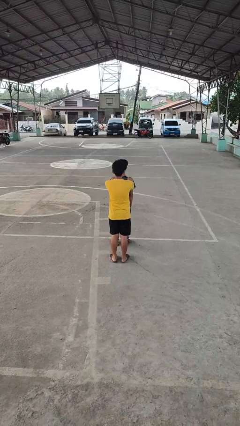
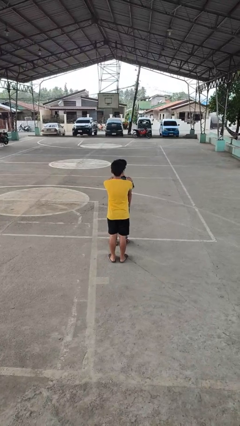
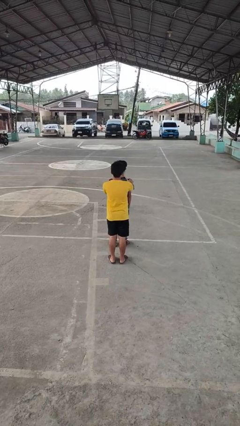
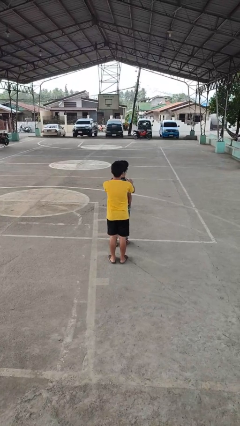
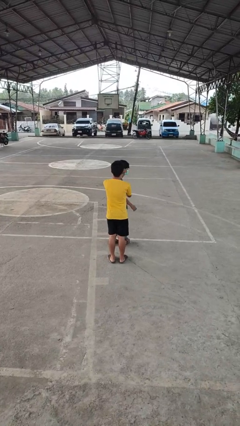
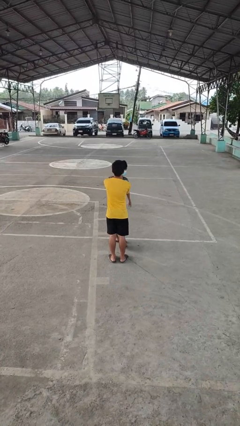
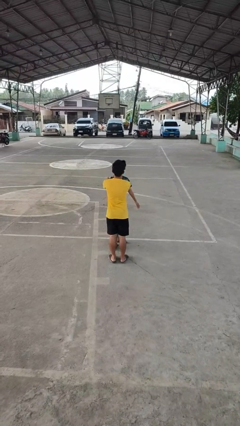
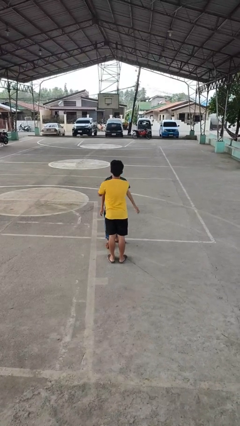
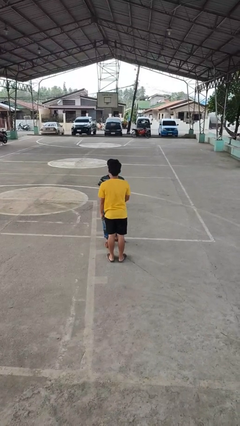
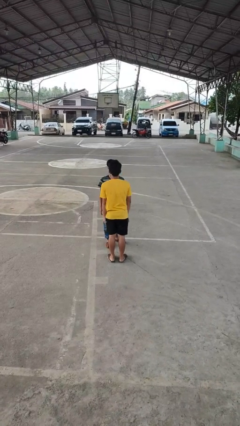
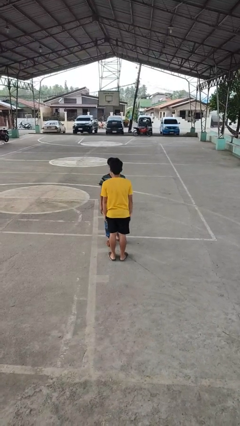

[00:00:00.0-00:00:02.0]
person spins person around

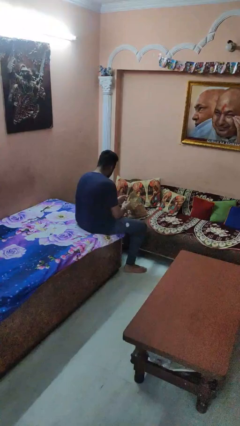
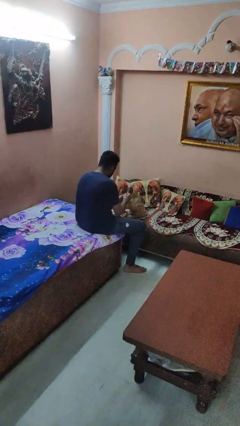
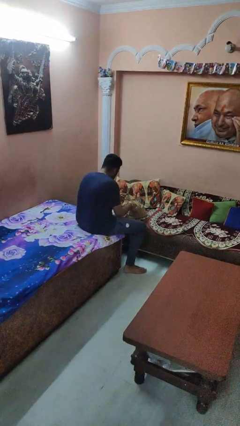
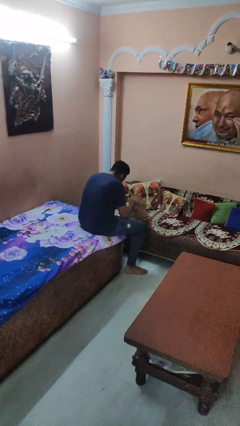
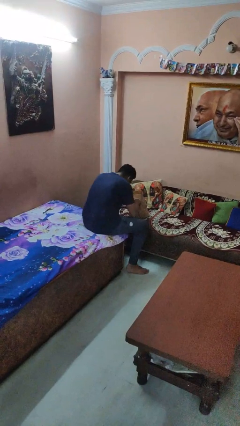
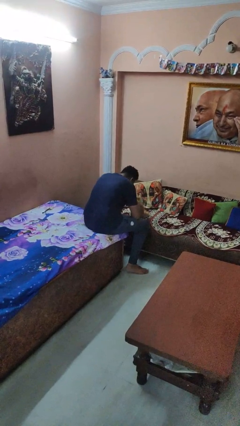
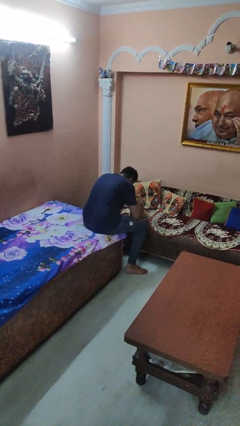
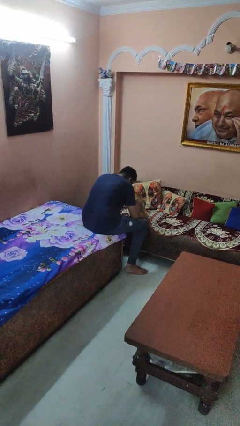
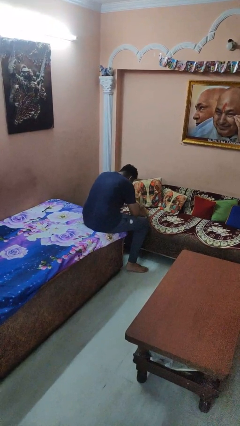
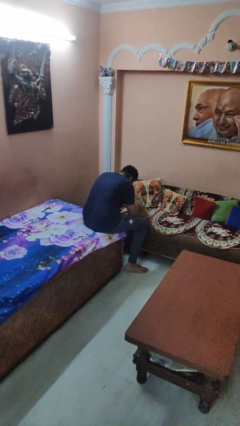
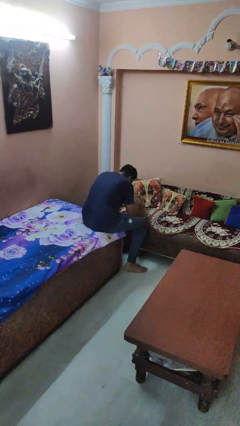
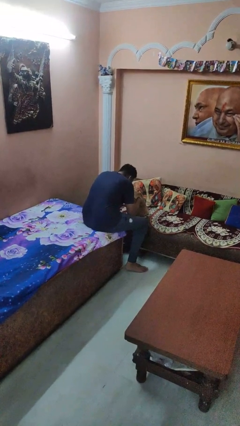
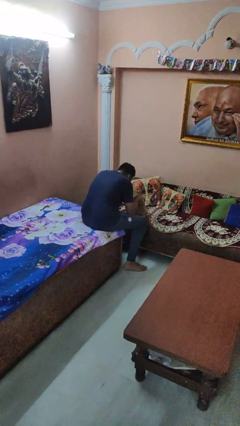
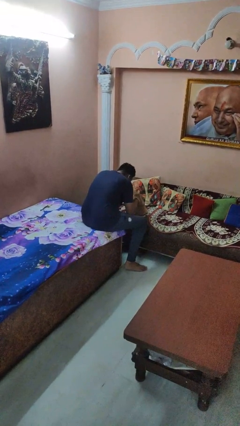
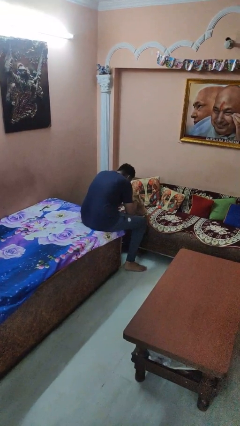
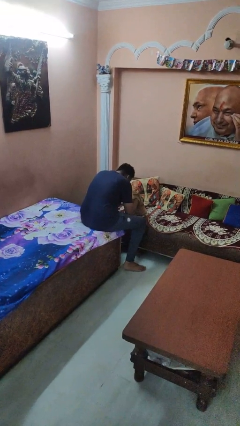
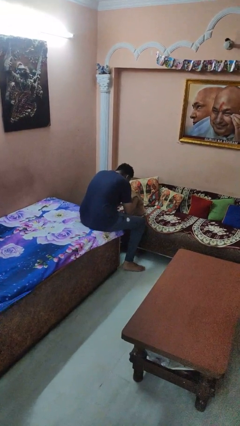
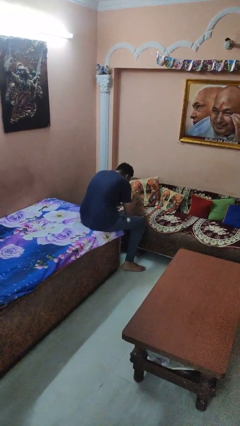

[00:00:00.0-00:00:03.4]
person searches in bag

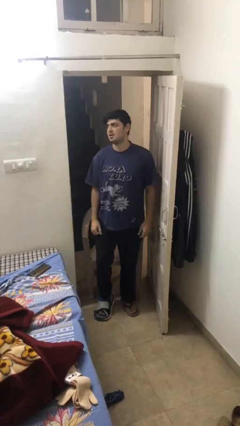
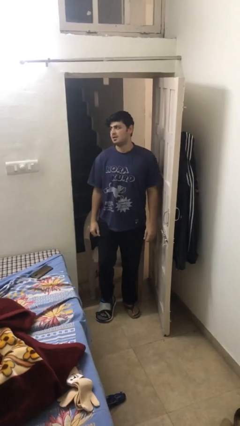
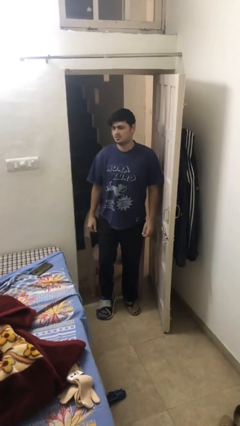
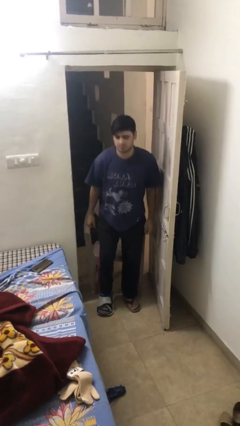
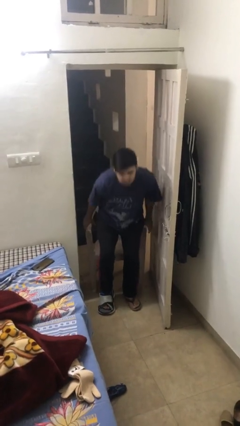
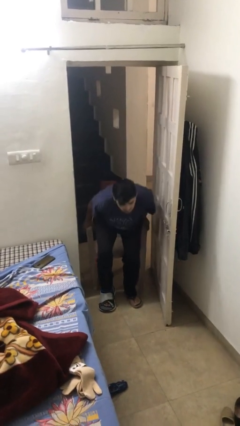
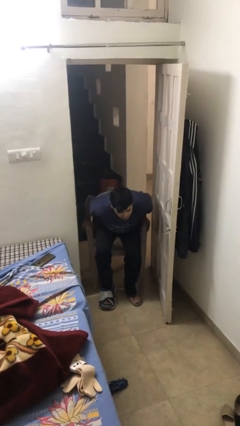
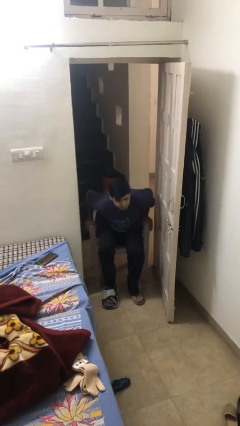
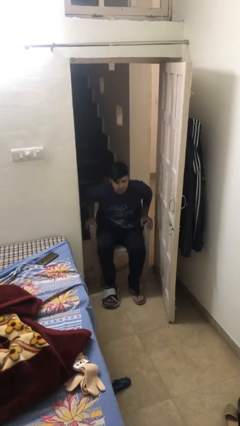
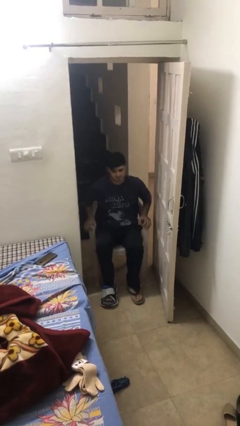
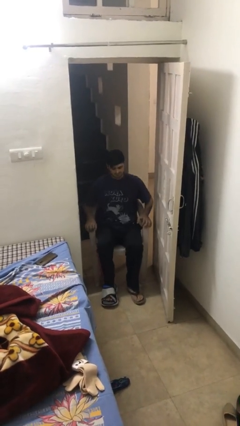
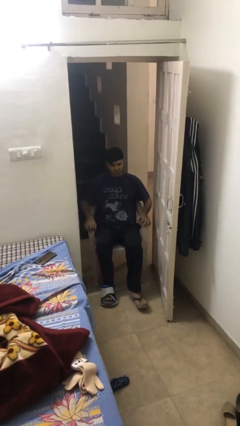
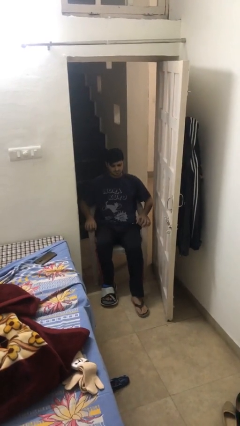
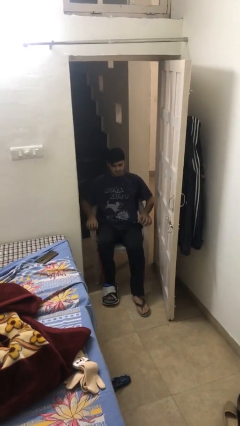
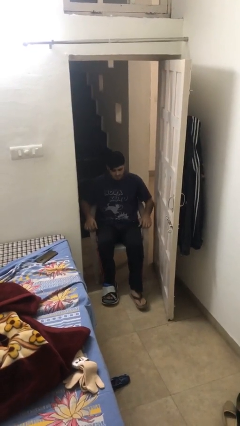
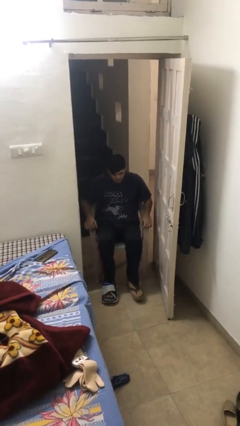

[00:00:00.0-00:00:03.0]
person sits down

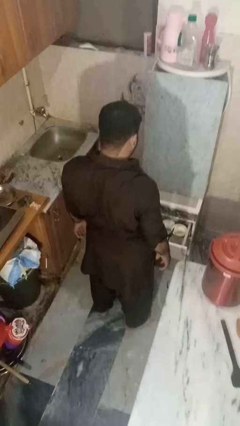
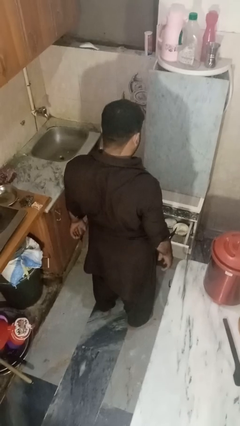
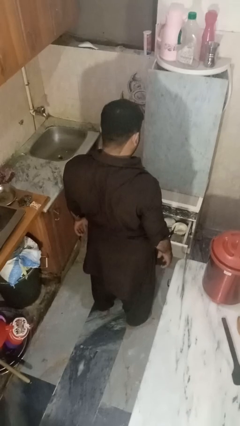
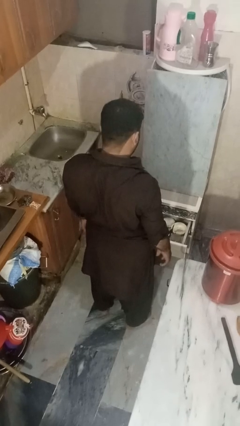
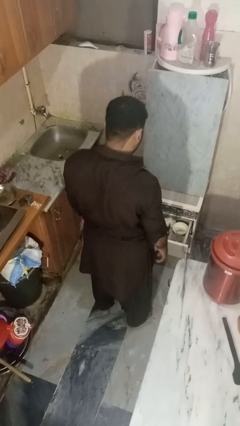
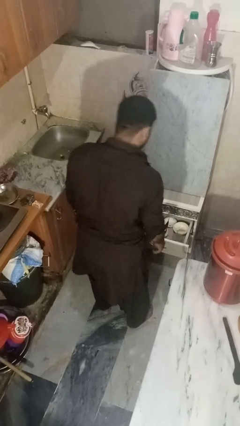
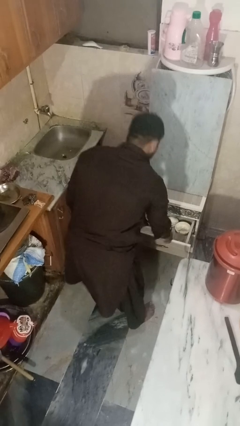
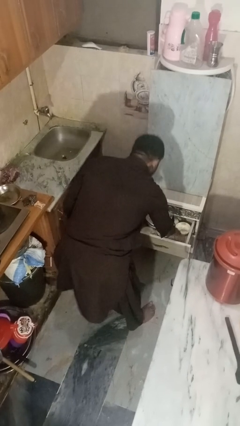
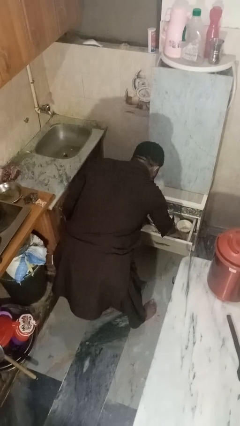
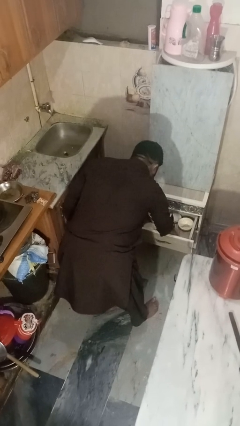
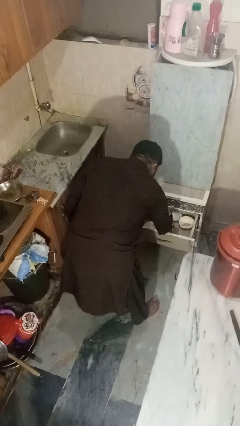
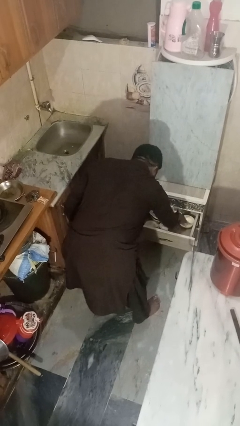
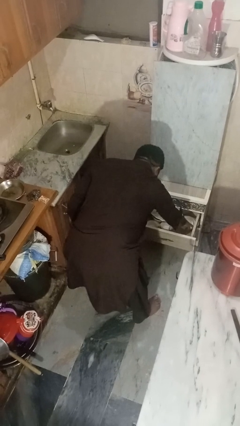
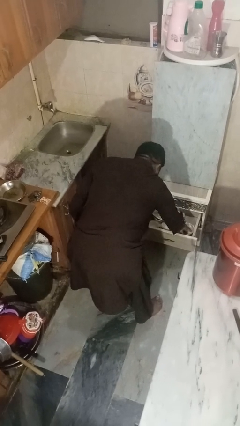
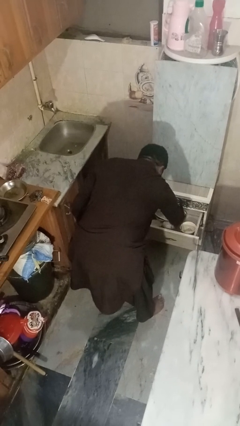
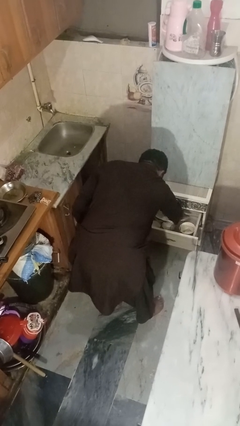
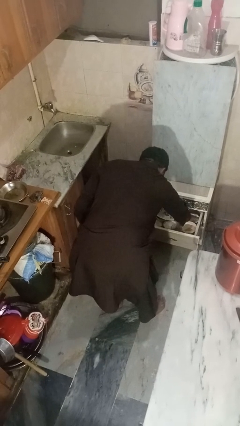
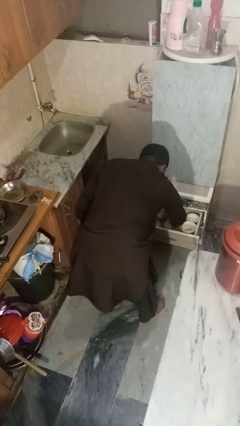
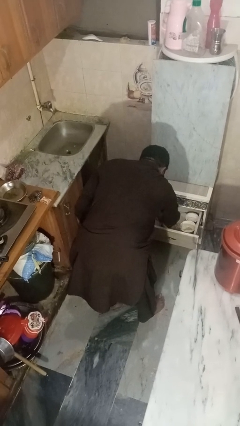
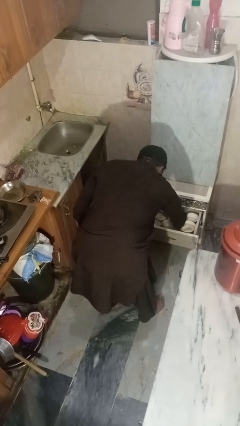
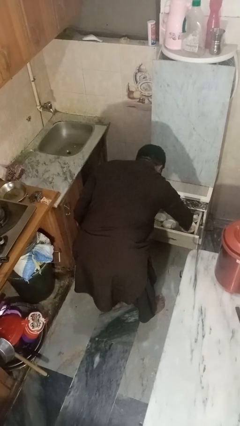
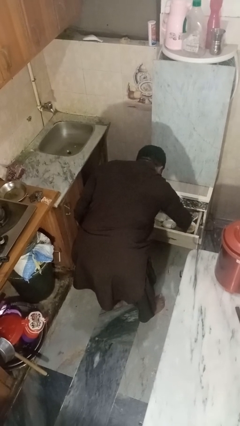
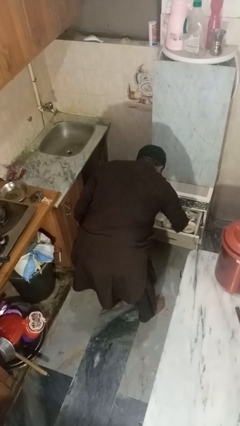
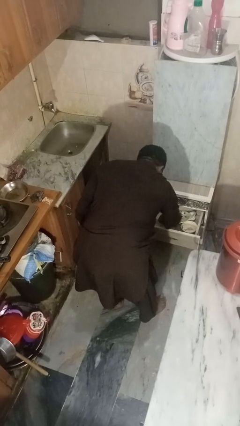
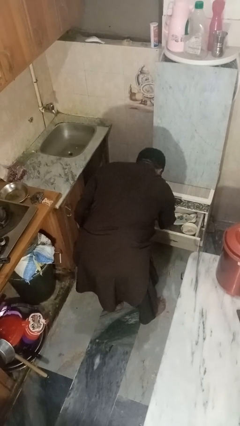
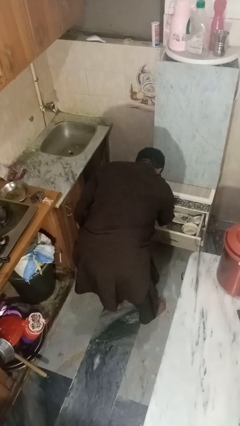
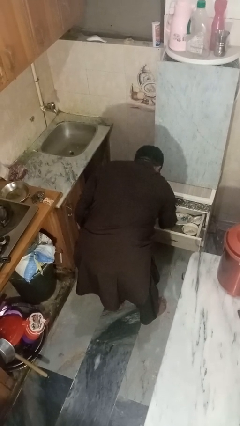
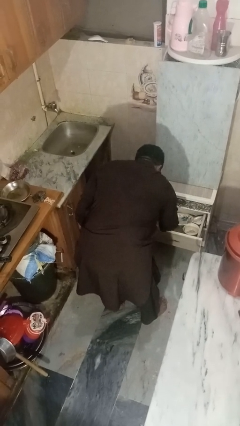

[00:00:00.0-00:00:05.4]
person searches in kitchen drawer

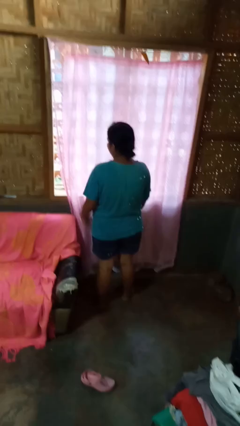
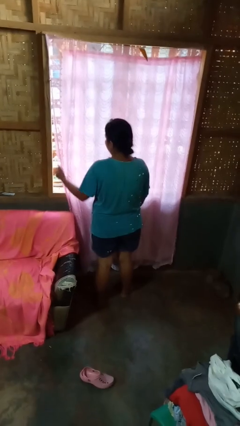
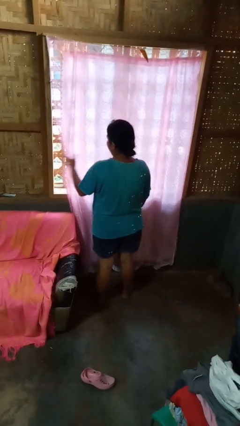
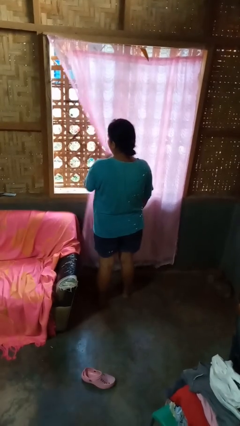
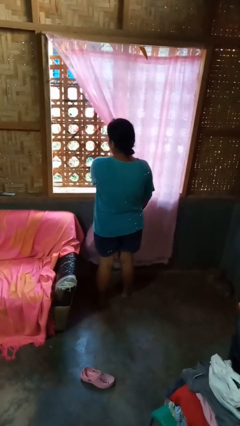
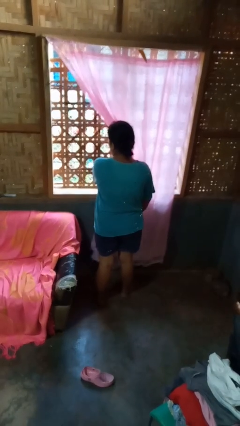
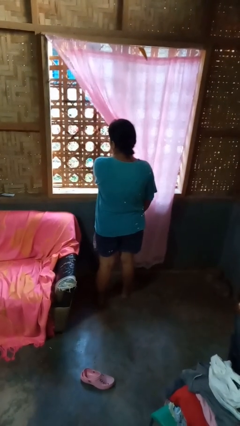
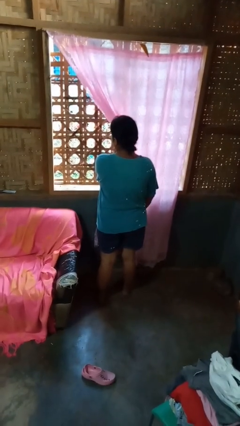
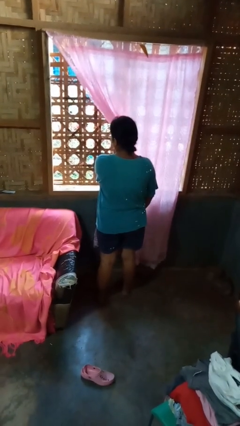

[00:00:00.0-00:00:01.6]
person opens curtains

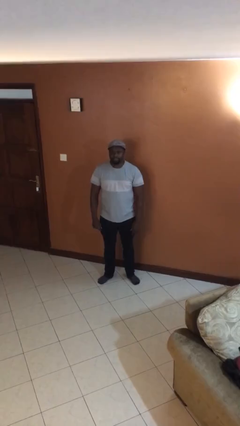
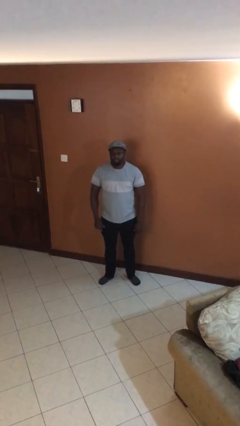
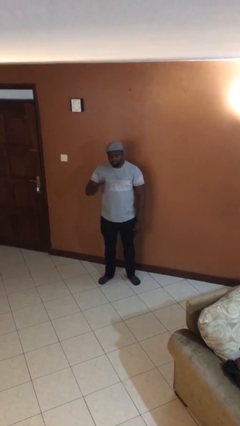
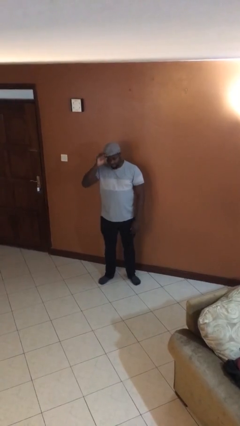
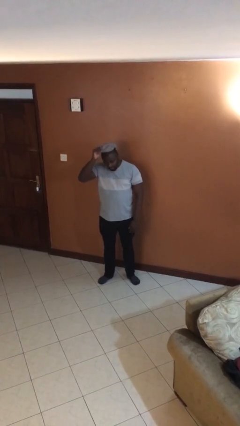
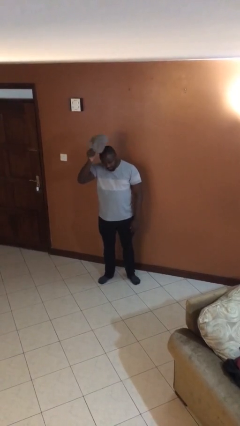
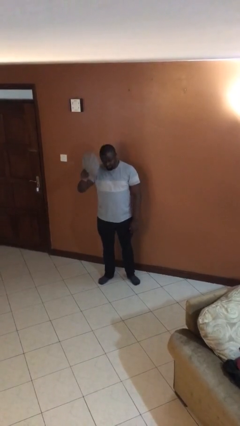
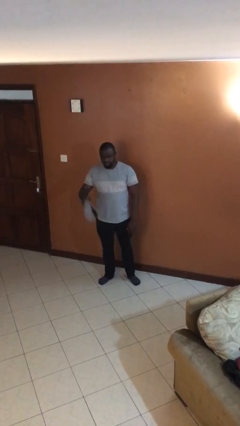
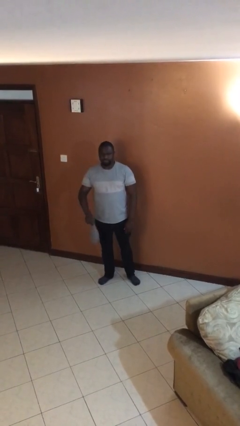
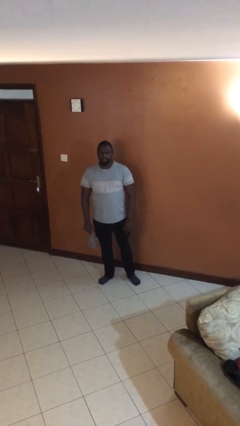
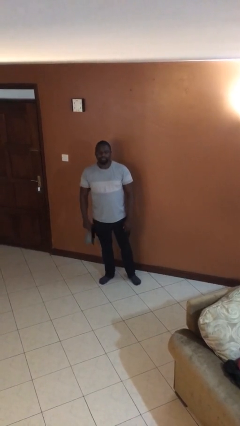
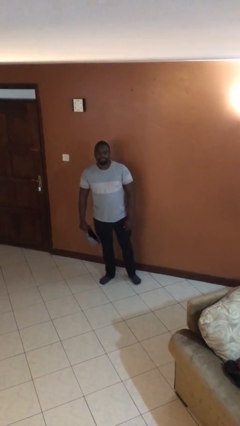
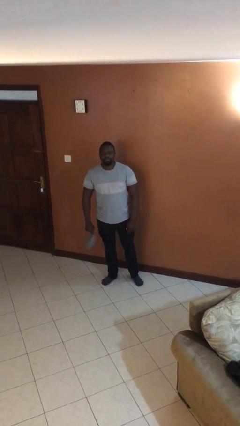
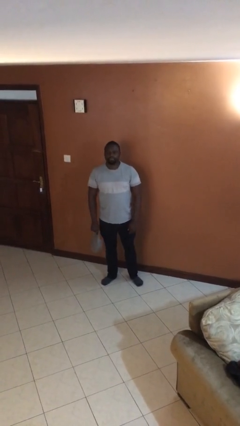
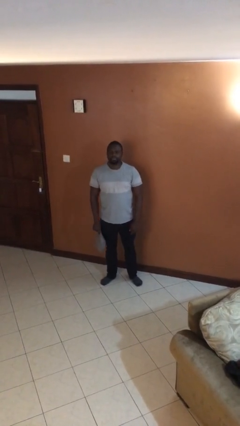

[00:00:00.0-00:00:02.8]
person takes off hat
